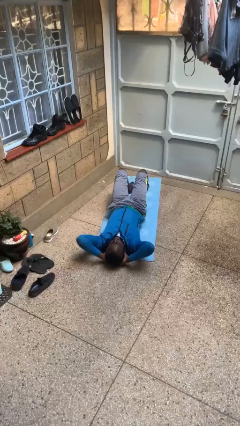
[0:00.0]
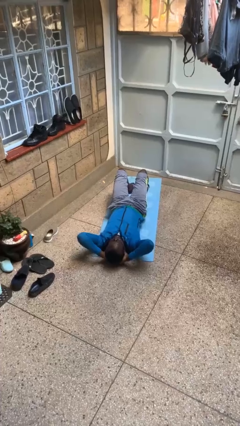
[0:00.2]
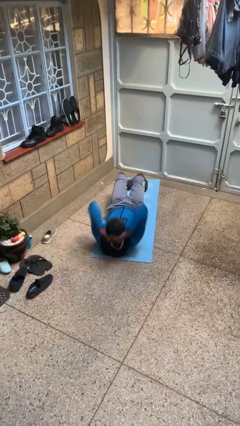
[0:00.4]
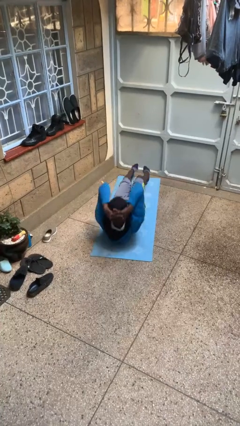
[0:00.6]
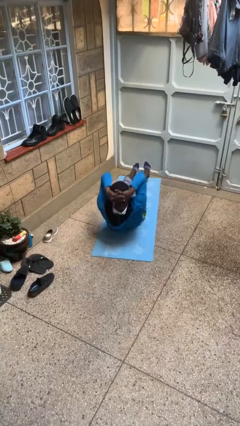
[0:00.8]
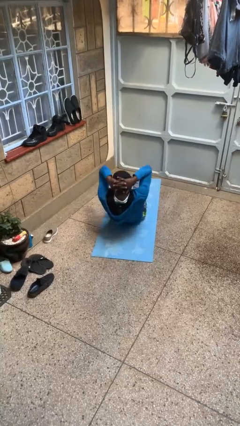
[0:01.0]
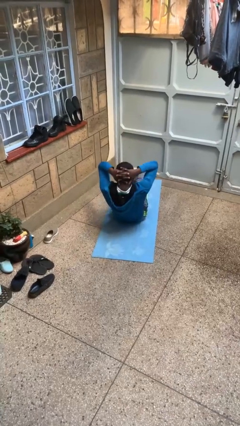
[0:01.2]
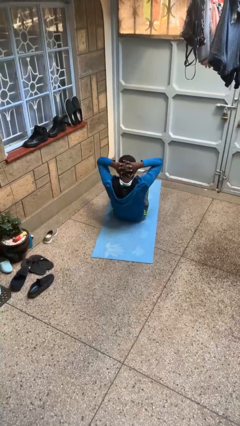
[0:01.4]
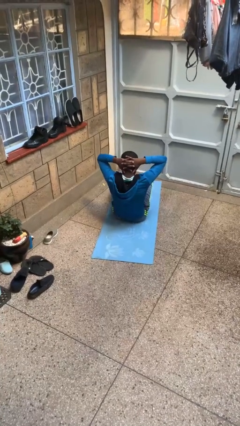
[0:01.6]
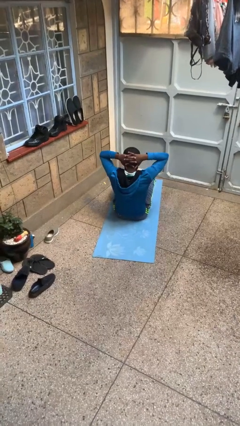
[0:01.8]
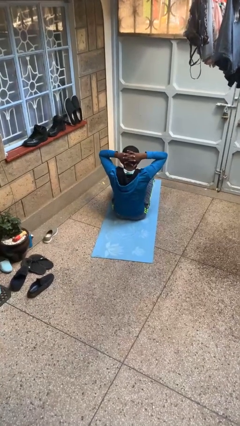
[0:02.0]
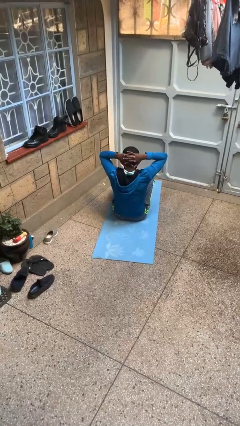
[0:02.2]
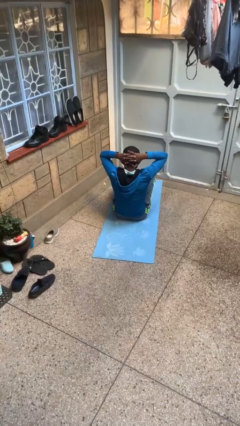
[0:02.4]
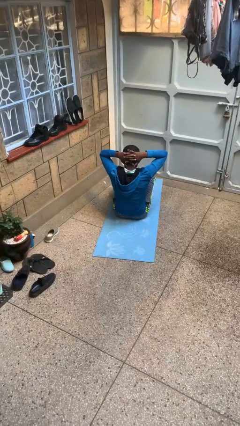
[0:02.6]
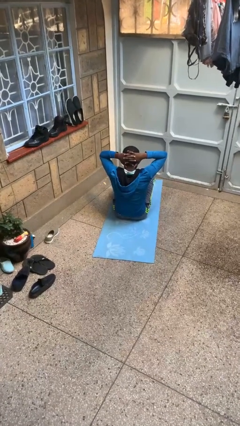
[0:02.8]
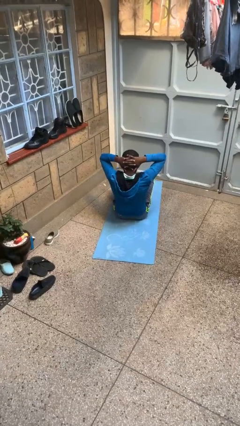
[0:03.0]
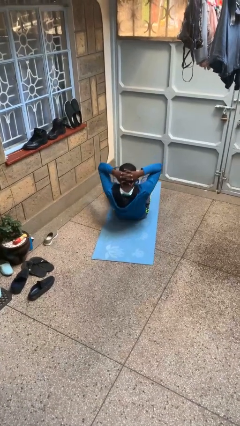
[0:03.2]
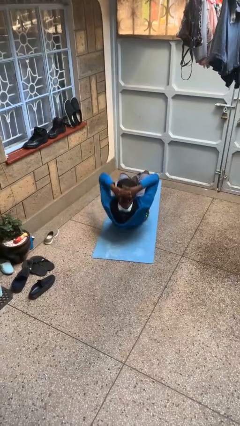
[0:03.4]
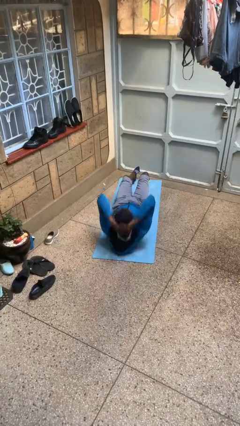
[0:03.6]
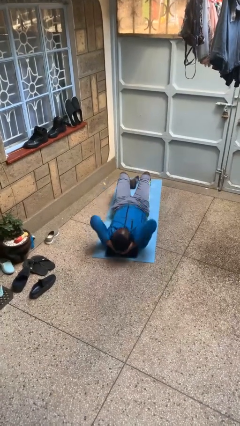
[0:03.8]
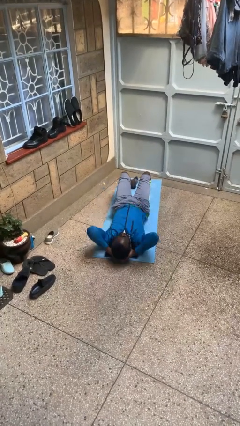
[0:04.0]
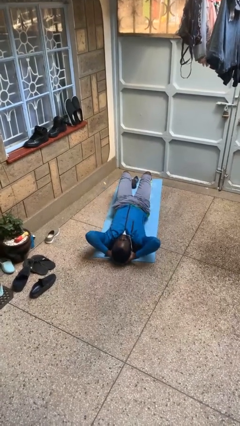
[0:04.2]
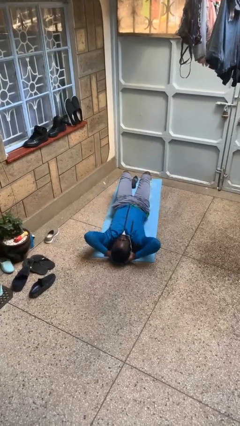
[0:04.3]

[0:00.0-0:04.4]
person exercises with situp

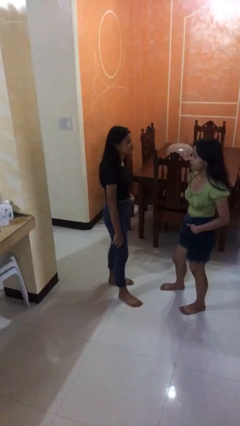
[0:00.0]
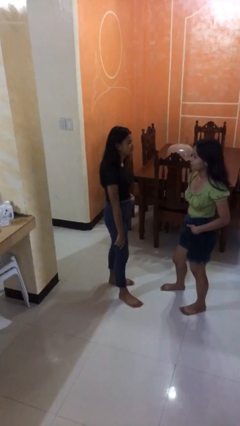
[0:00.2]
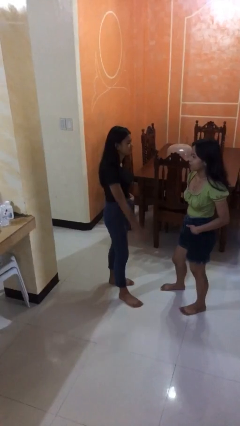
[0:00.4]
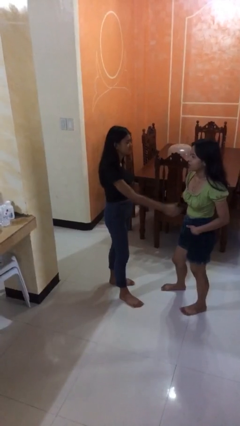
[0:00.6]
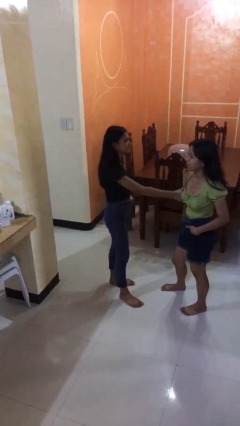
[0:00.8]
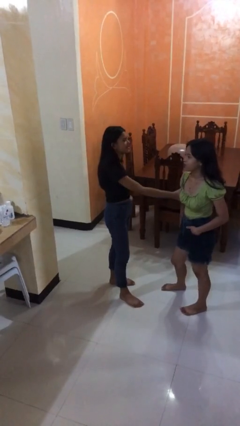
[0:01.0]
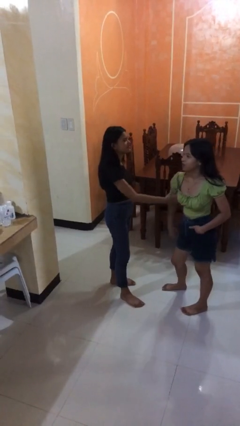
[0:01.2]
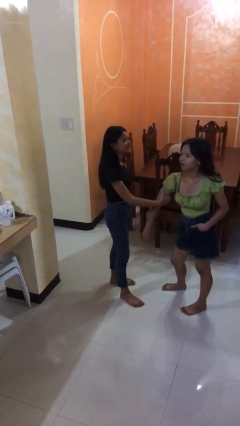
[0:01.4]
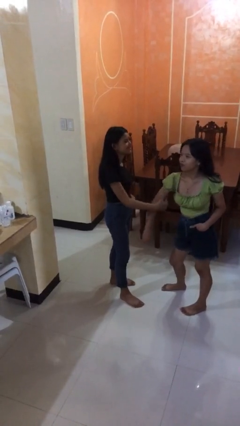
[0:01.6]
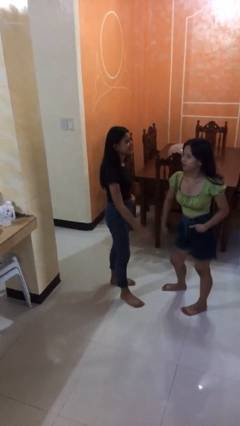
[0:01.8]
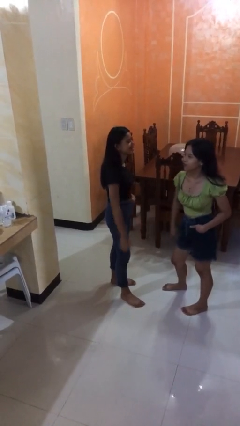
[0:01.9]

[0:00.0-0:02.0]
person grabs person by bicep

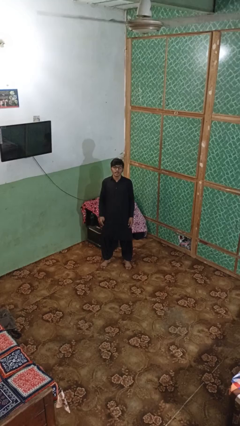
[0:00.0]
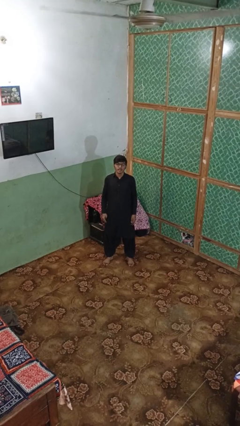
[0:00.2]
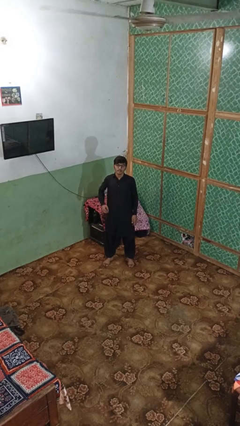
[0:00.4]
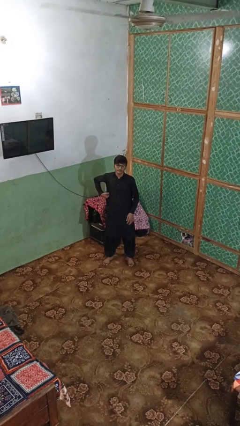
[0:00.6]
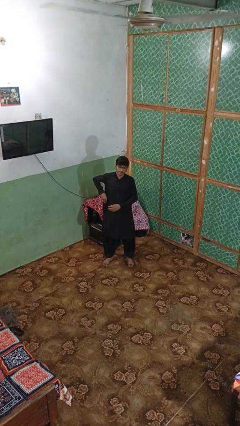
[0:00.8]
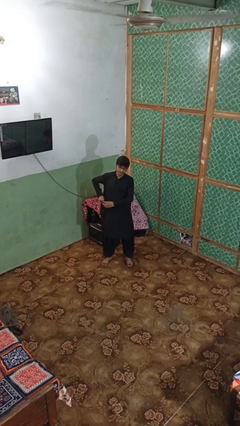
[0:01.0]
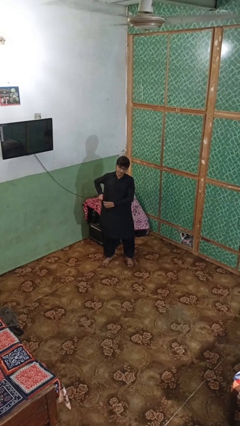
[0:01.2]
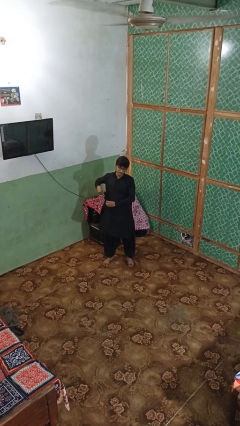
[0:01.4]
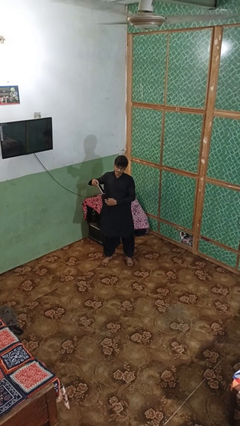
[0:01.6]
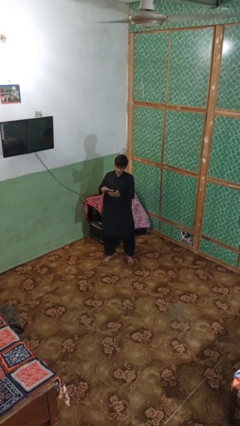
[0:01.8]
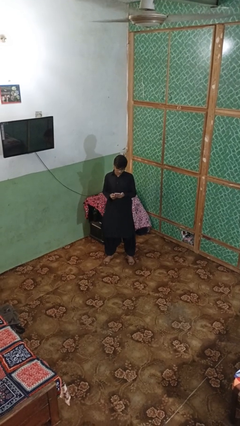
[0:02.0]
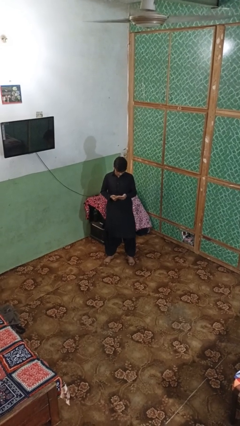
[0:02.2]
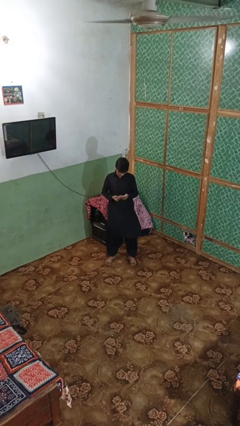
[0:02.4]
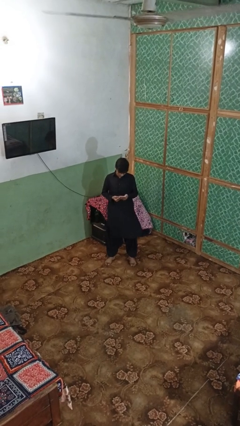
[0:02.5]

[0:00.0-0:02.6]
person takes phone from pocket

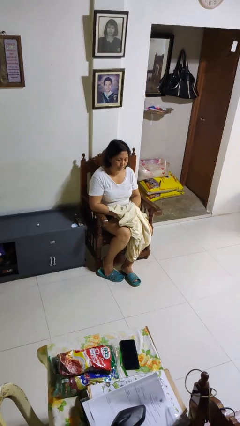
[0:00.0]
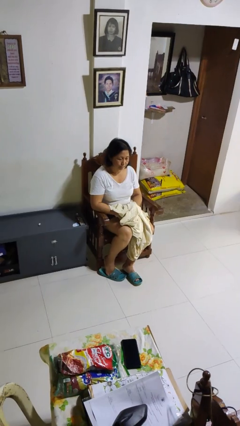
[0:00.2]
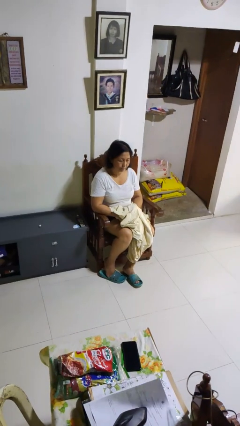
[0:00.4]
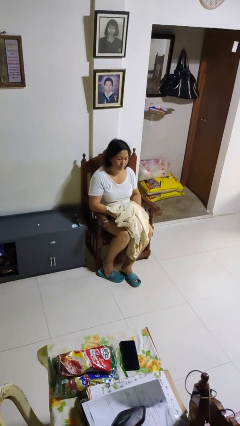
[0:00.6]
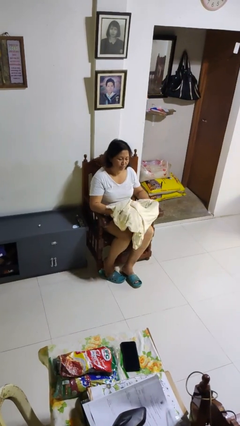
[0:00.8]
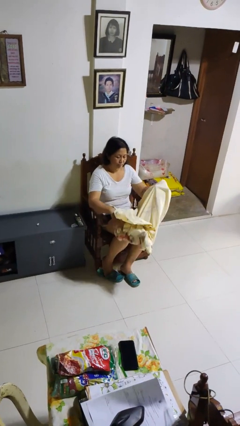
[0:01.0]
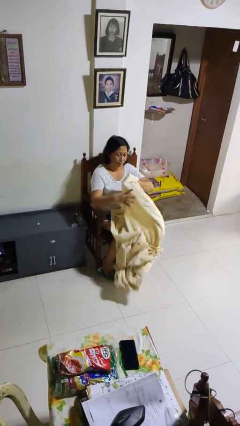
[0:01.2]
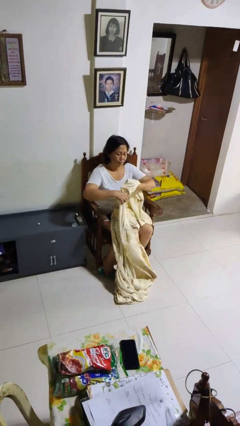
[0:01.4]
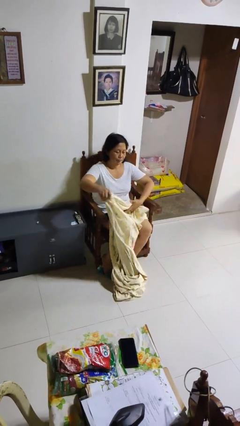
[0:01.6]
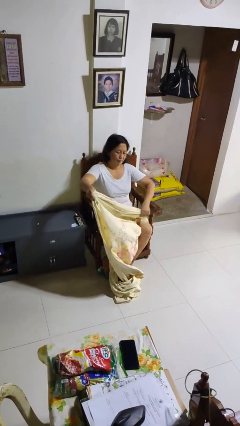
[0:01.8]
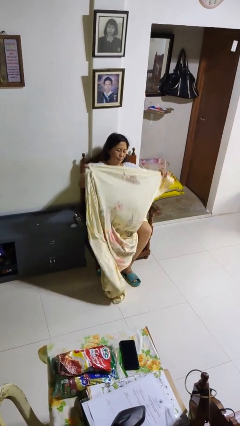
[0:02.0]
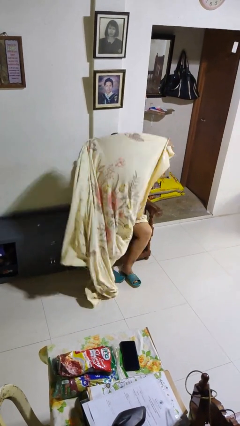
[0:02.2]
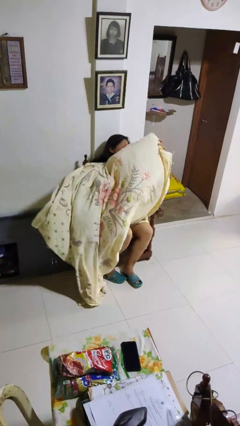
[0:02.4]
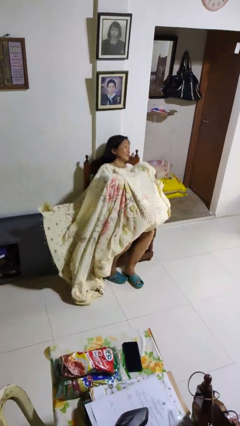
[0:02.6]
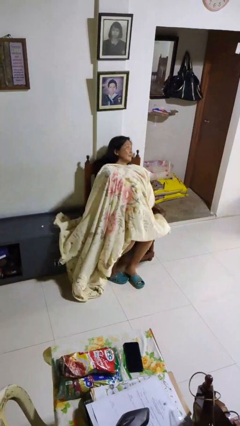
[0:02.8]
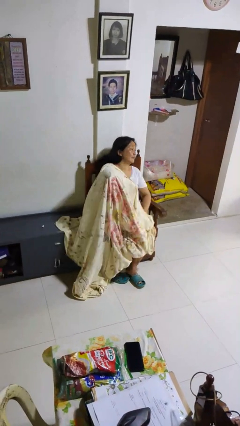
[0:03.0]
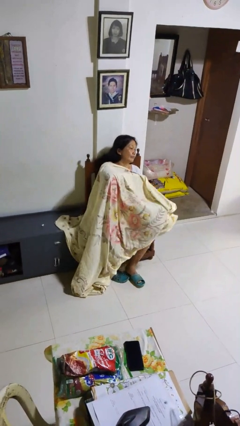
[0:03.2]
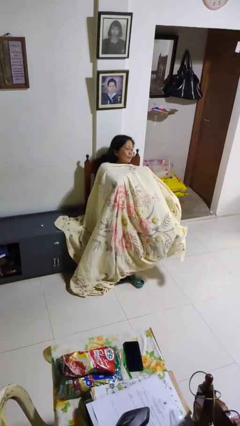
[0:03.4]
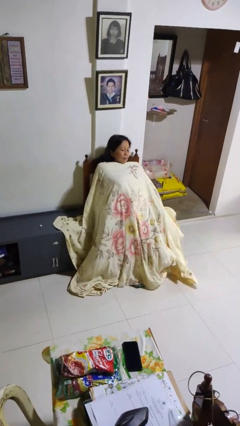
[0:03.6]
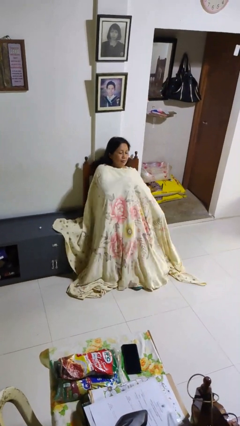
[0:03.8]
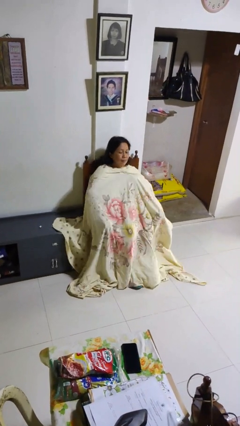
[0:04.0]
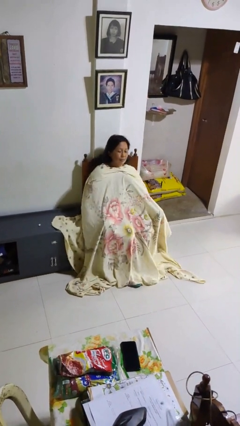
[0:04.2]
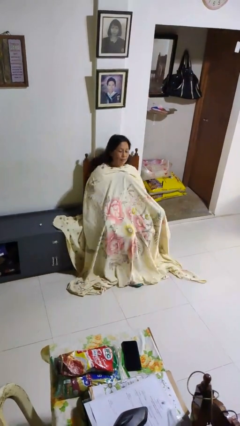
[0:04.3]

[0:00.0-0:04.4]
person covers with blanket

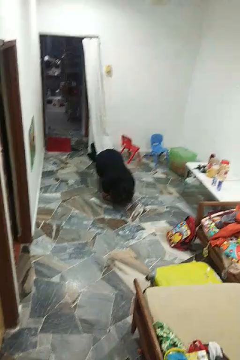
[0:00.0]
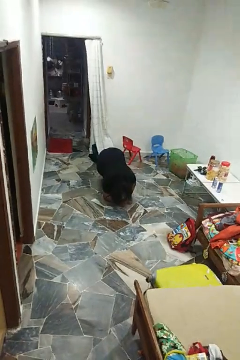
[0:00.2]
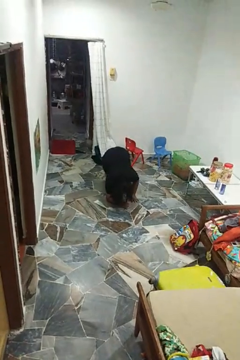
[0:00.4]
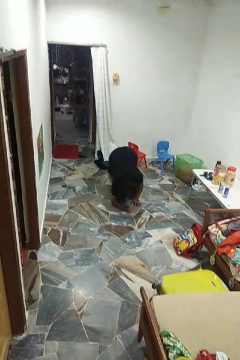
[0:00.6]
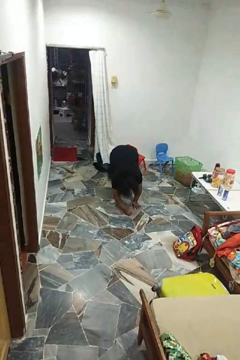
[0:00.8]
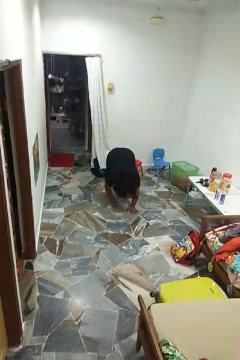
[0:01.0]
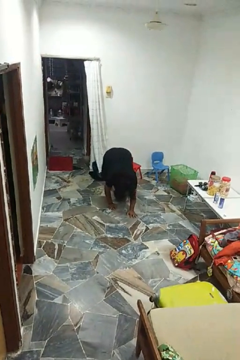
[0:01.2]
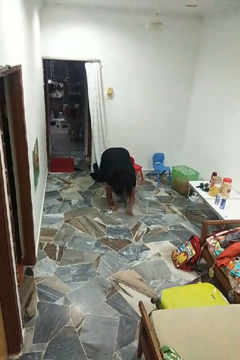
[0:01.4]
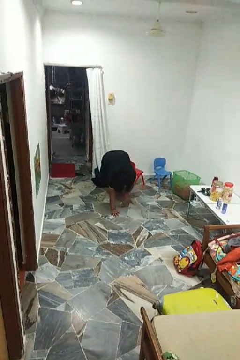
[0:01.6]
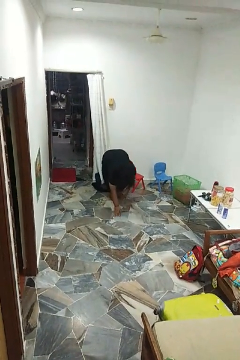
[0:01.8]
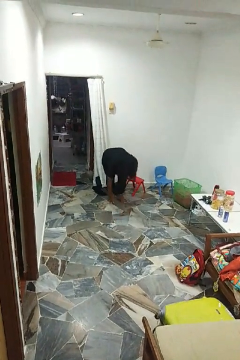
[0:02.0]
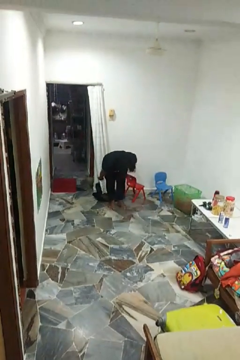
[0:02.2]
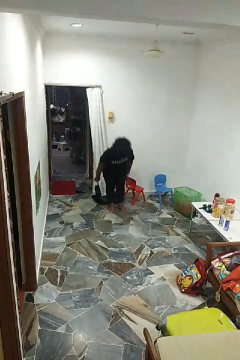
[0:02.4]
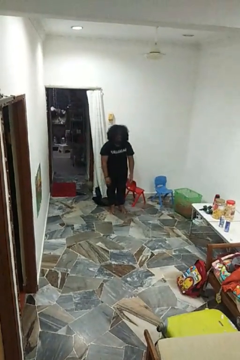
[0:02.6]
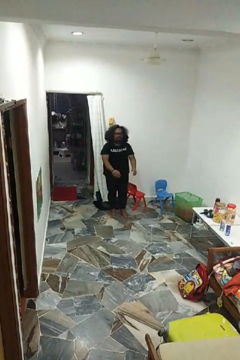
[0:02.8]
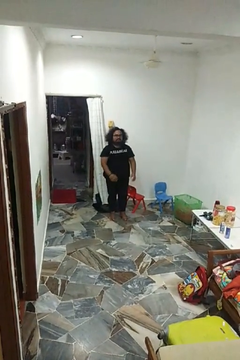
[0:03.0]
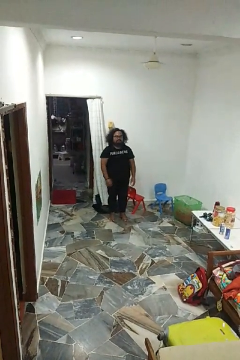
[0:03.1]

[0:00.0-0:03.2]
person stands up from floor

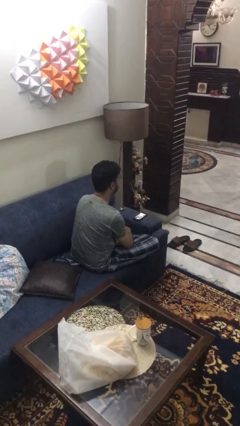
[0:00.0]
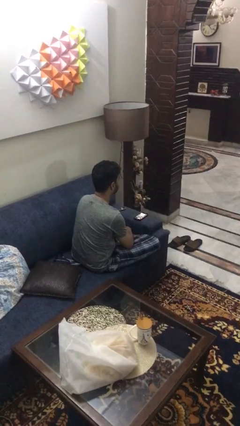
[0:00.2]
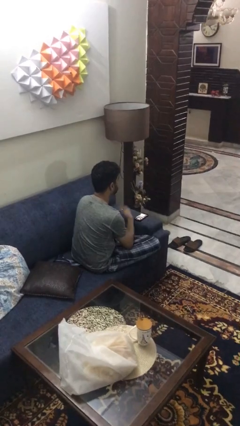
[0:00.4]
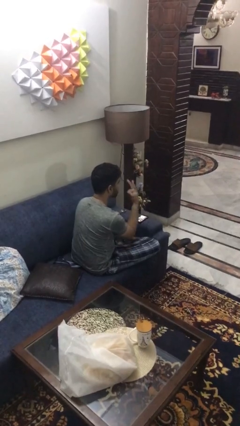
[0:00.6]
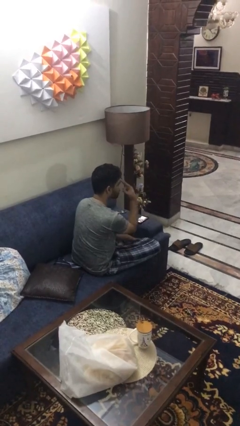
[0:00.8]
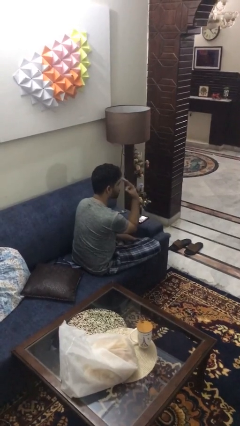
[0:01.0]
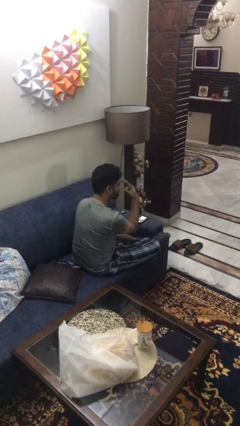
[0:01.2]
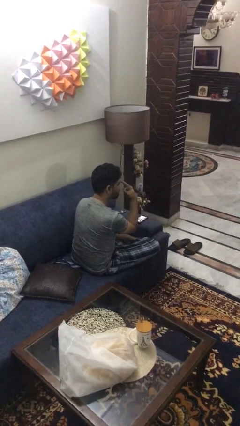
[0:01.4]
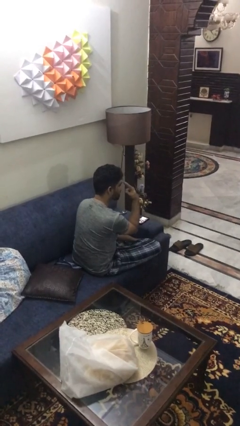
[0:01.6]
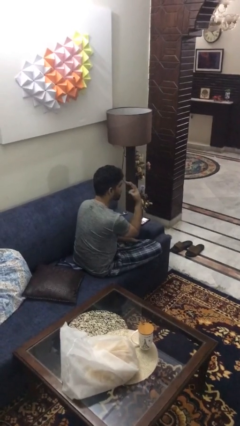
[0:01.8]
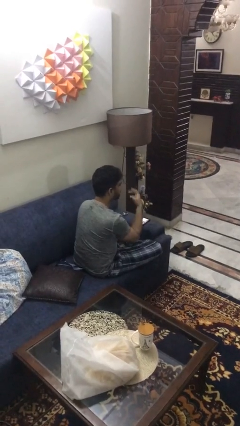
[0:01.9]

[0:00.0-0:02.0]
person gestures watch closely
